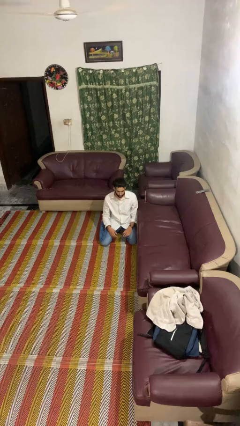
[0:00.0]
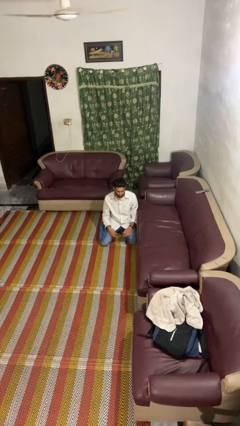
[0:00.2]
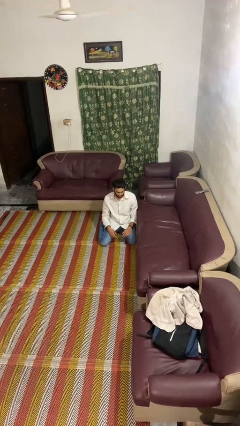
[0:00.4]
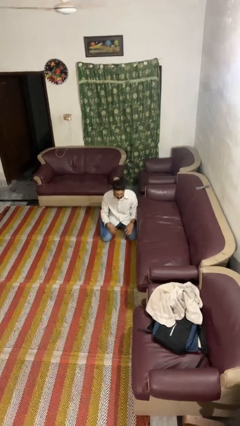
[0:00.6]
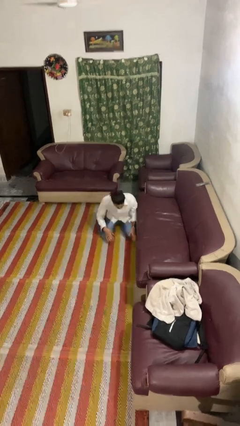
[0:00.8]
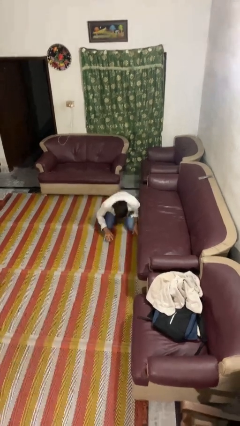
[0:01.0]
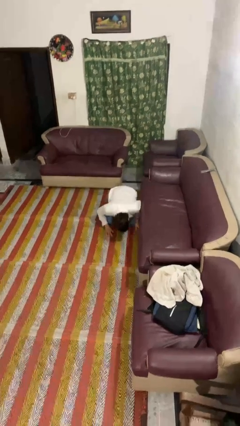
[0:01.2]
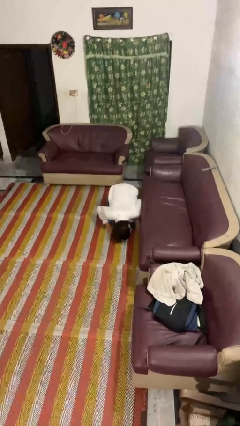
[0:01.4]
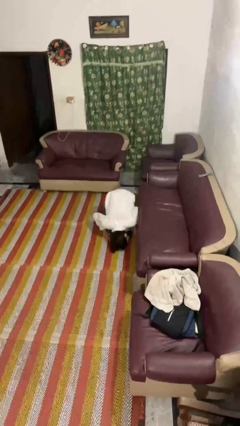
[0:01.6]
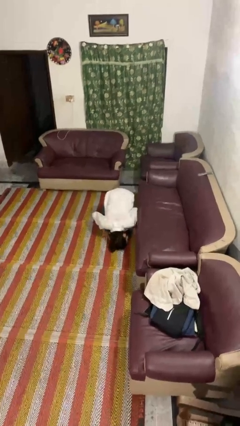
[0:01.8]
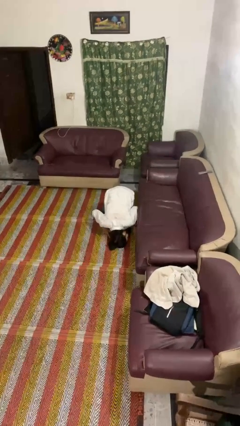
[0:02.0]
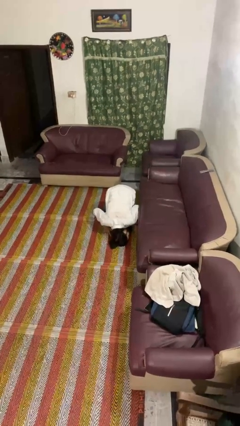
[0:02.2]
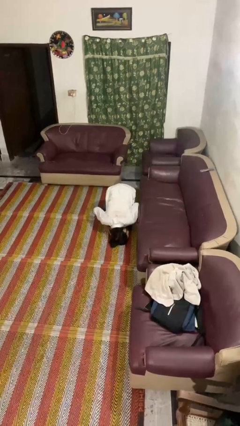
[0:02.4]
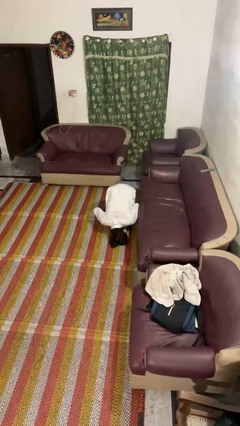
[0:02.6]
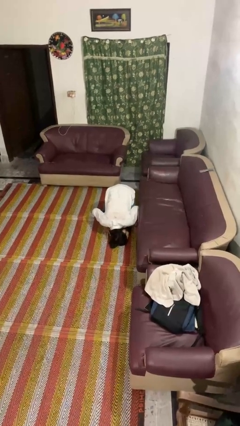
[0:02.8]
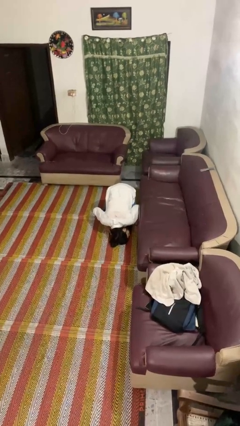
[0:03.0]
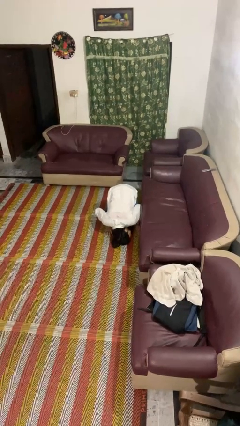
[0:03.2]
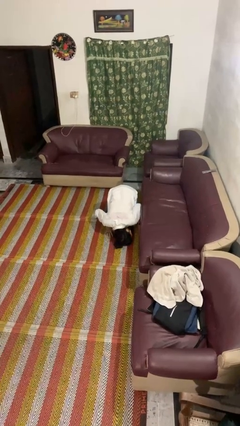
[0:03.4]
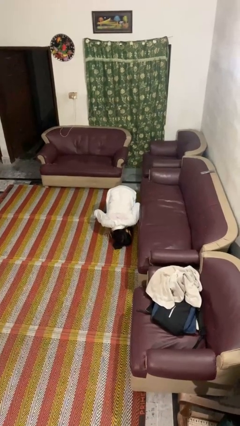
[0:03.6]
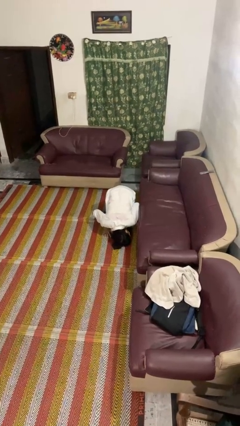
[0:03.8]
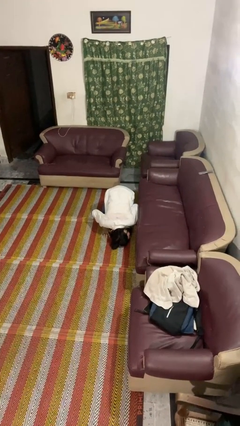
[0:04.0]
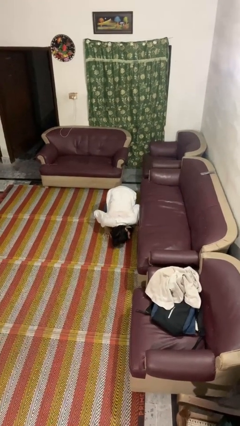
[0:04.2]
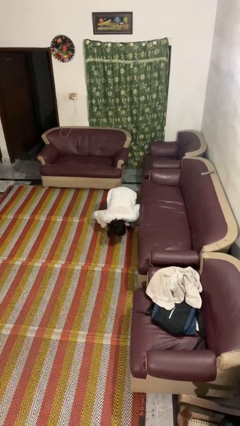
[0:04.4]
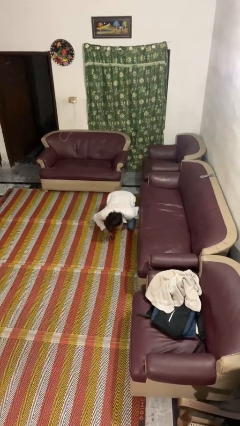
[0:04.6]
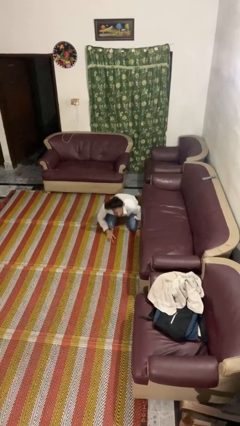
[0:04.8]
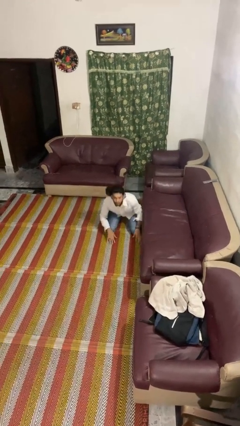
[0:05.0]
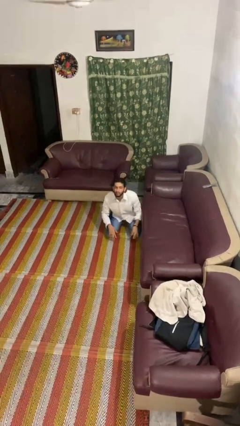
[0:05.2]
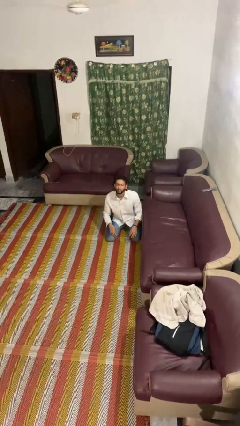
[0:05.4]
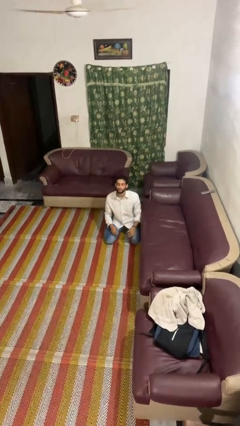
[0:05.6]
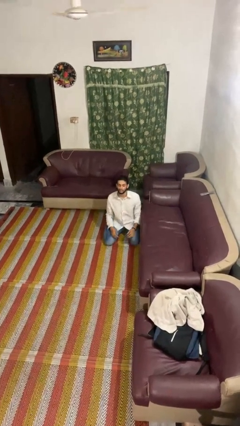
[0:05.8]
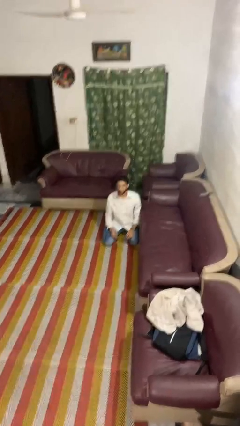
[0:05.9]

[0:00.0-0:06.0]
person searches under couch

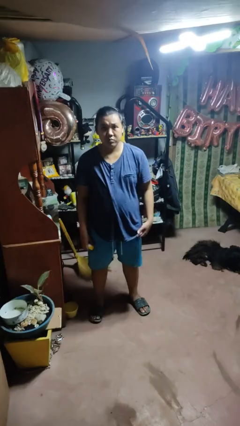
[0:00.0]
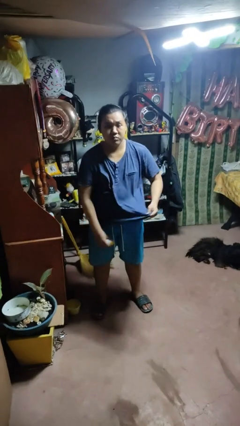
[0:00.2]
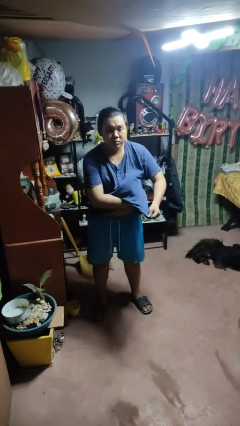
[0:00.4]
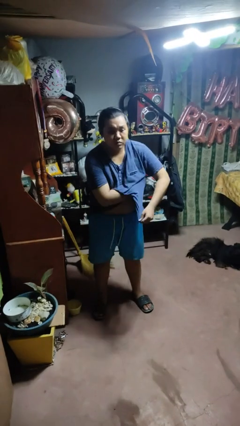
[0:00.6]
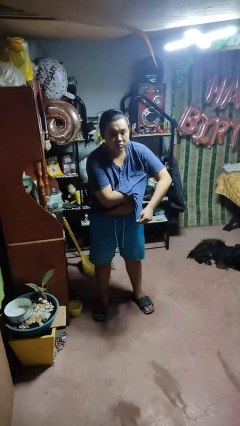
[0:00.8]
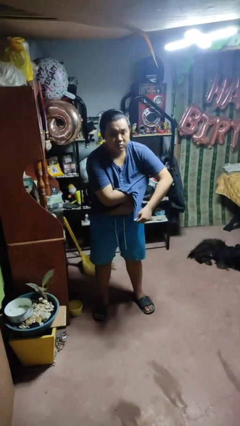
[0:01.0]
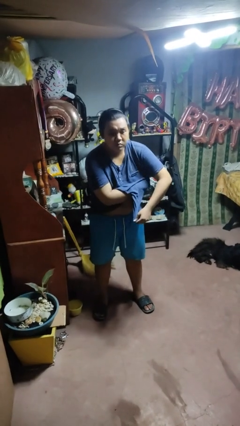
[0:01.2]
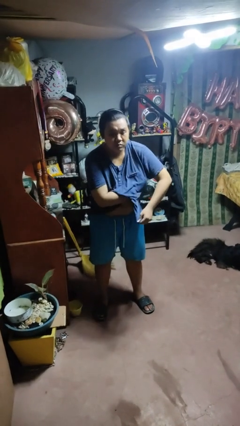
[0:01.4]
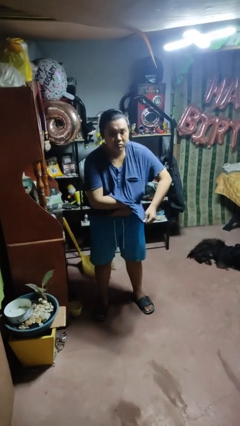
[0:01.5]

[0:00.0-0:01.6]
person applies deodorant

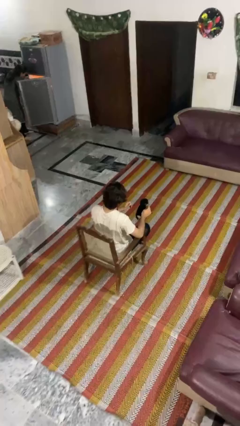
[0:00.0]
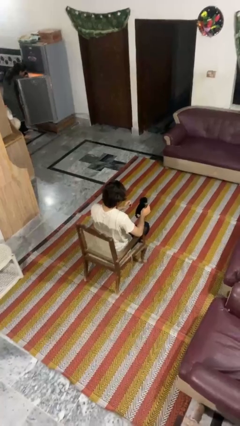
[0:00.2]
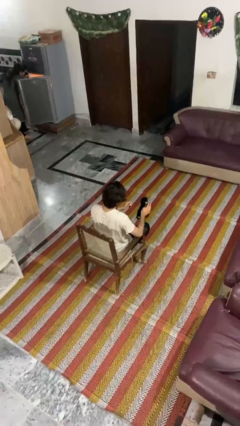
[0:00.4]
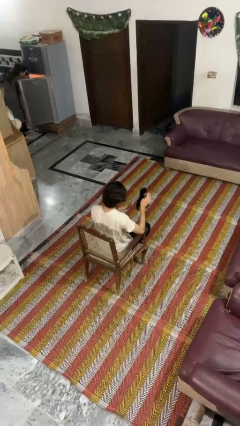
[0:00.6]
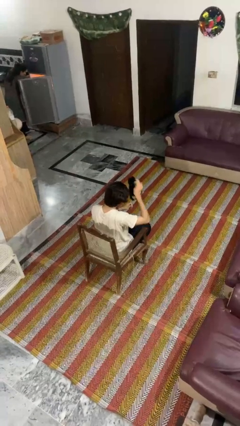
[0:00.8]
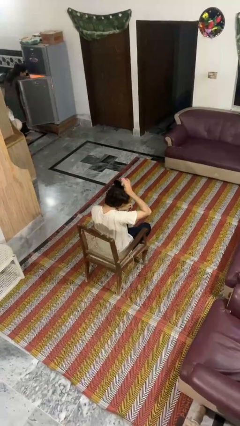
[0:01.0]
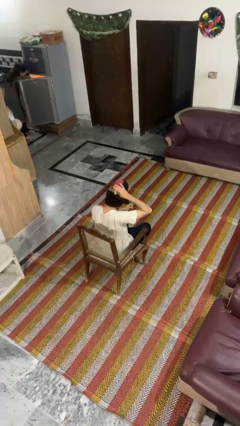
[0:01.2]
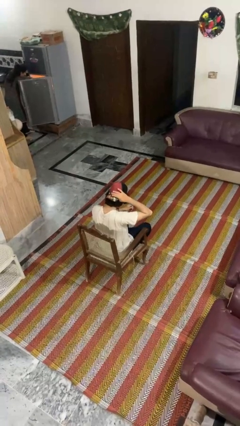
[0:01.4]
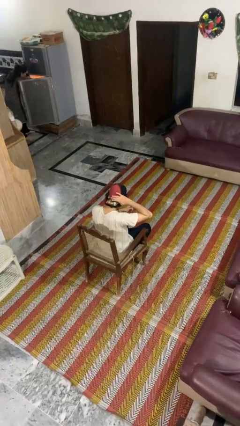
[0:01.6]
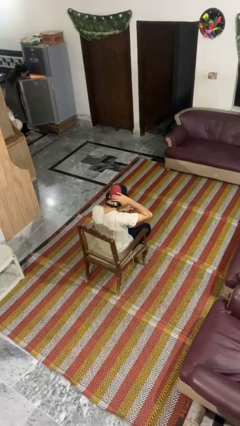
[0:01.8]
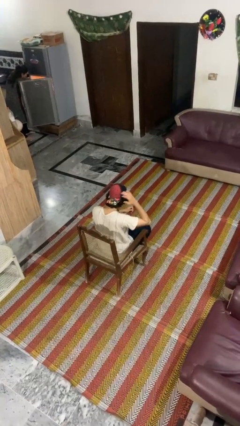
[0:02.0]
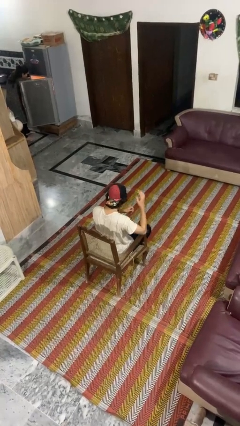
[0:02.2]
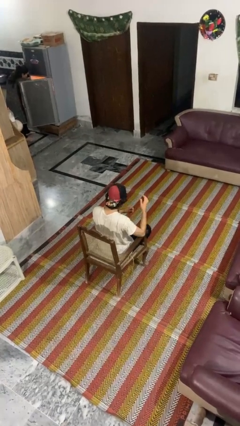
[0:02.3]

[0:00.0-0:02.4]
person puts on hat

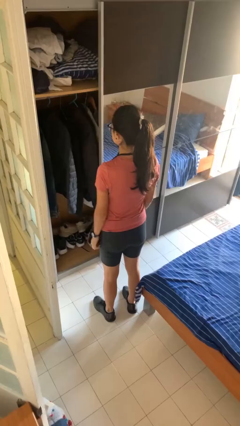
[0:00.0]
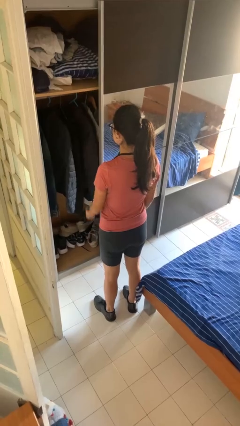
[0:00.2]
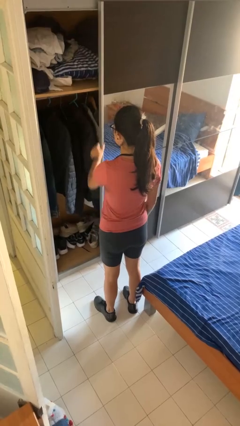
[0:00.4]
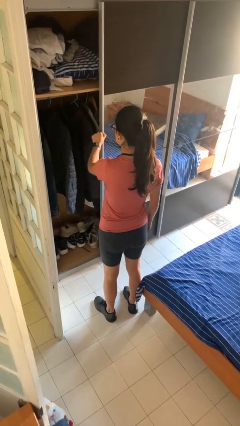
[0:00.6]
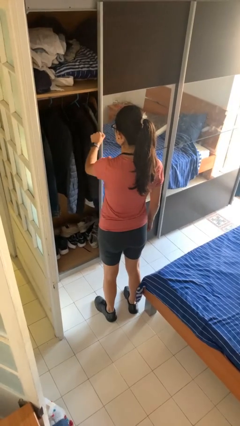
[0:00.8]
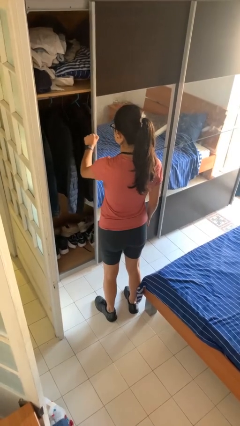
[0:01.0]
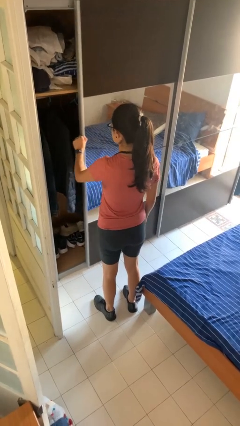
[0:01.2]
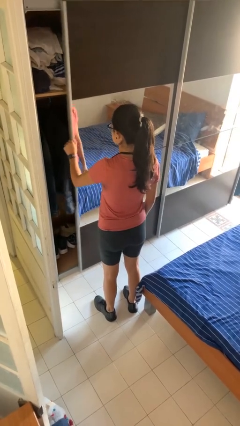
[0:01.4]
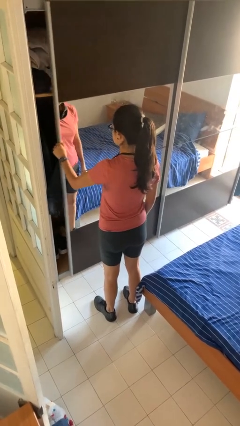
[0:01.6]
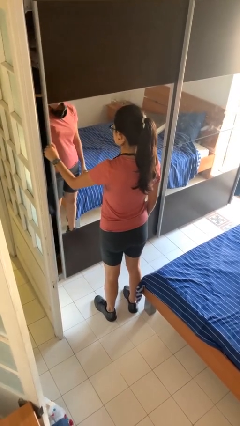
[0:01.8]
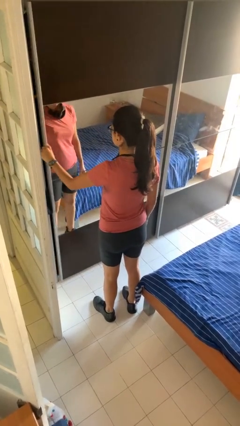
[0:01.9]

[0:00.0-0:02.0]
person closes dresser drawer

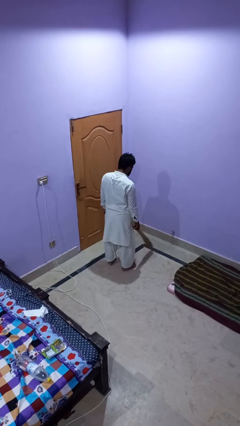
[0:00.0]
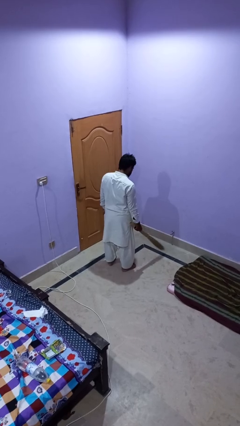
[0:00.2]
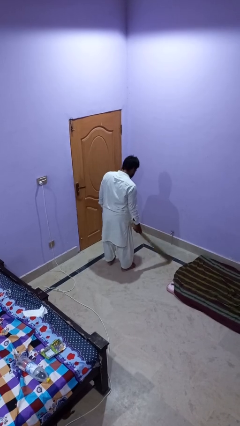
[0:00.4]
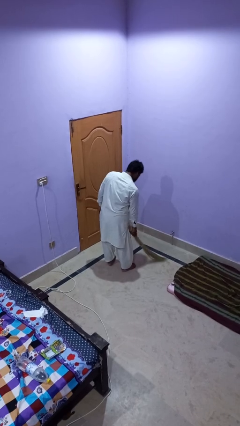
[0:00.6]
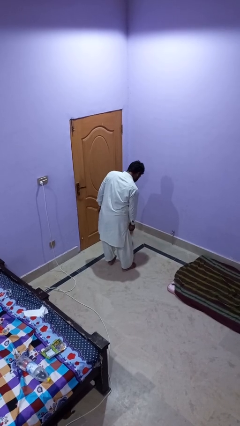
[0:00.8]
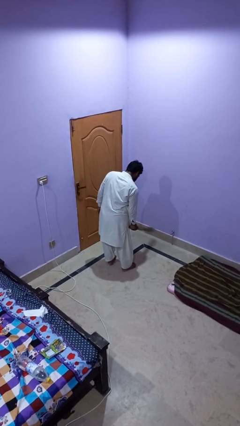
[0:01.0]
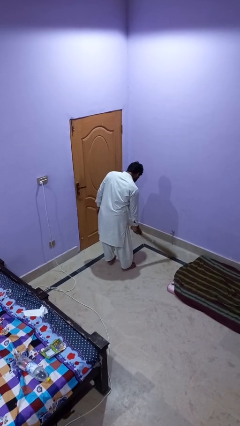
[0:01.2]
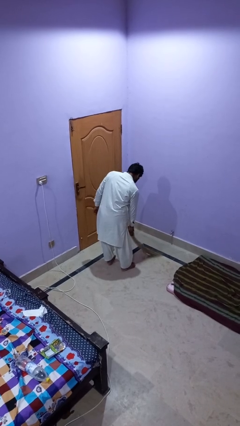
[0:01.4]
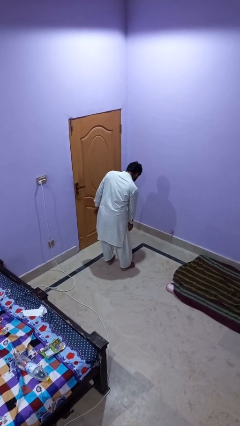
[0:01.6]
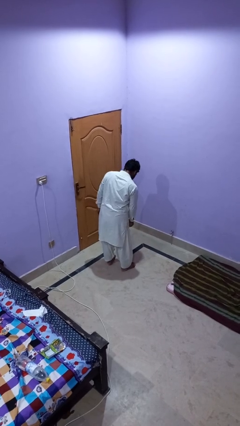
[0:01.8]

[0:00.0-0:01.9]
person sweeps floor

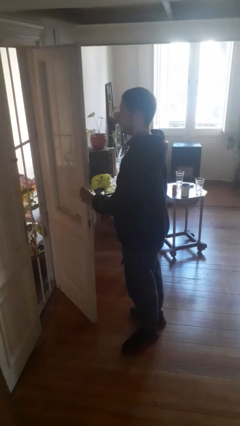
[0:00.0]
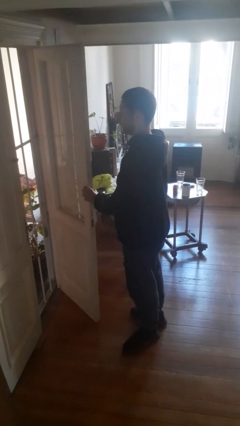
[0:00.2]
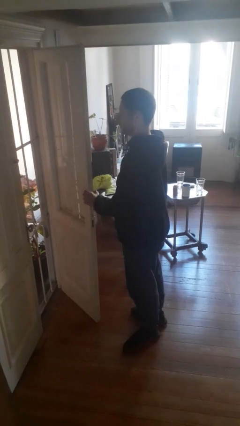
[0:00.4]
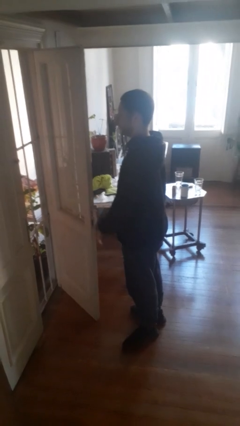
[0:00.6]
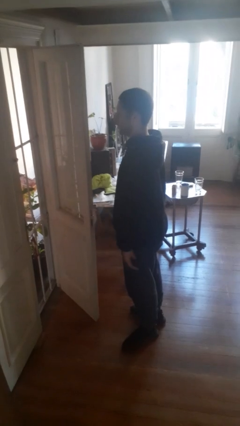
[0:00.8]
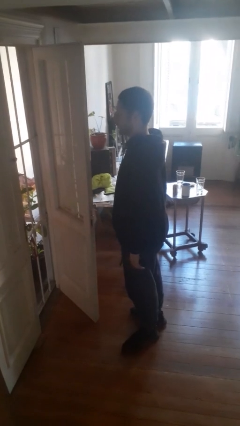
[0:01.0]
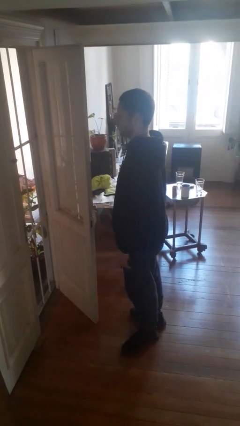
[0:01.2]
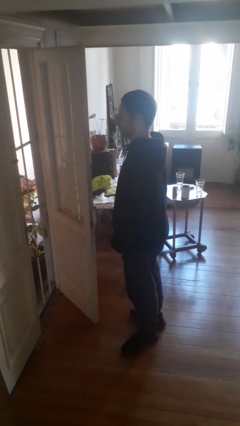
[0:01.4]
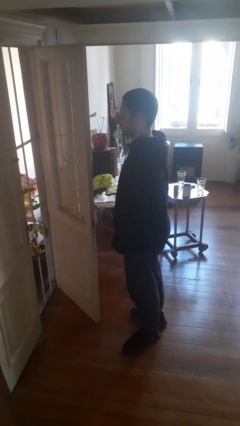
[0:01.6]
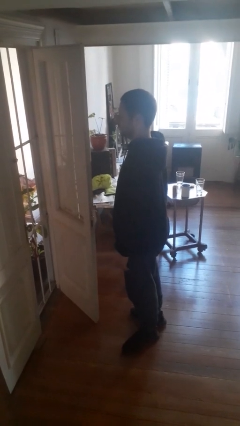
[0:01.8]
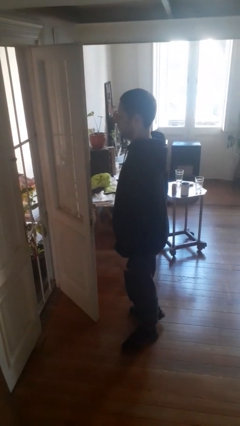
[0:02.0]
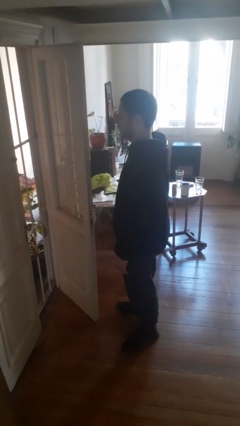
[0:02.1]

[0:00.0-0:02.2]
person opens facility door

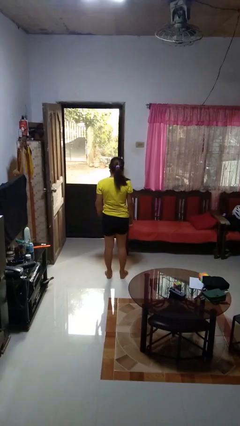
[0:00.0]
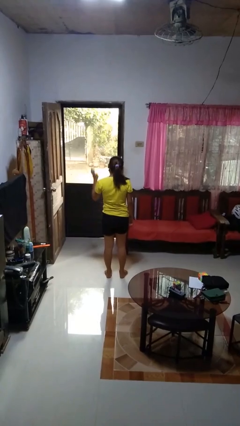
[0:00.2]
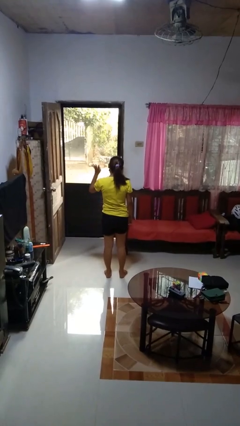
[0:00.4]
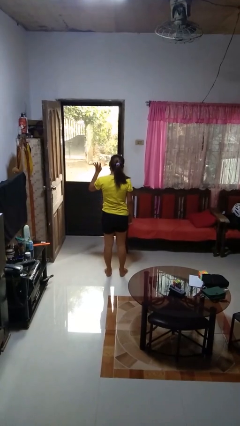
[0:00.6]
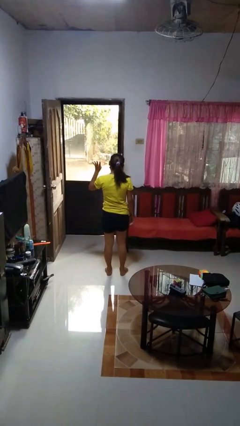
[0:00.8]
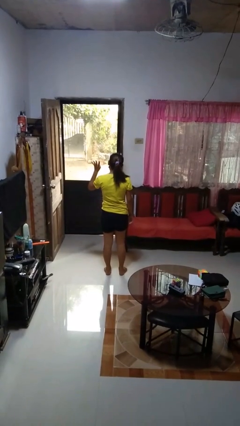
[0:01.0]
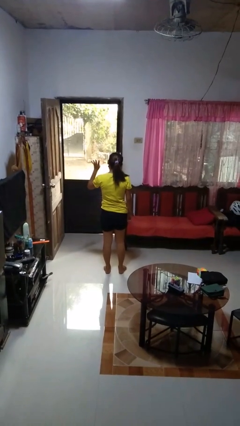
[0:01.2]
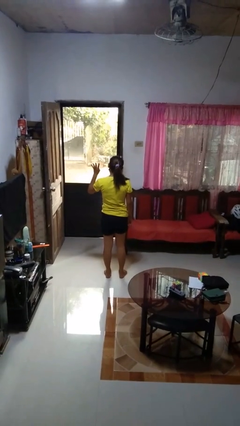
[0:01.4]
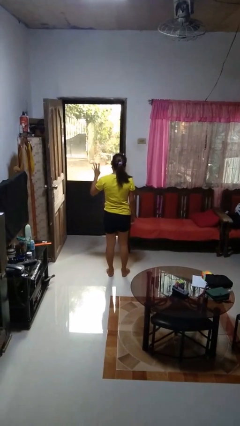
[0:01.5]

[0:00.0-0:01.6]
person gestures number four
